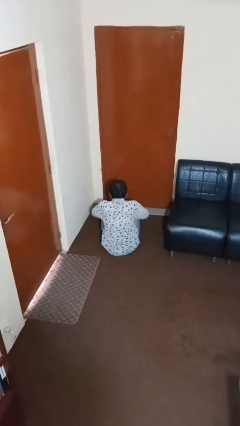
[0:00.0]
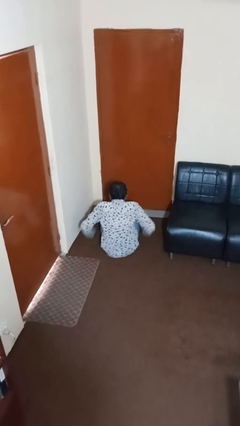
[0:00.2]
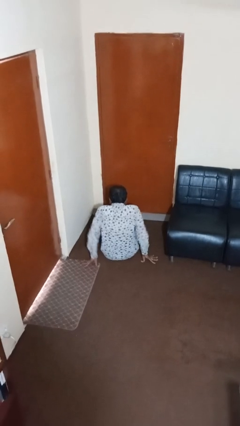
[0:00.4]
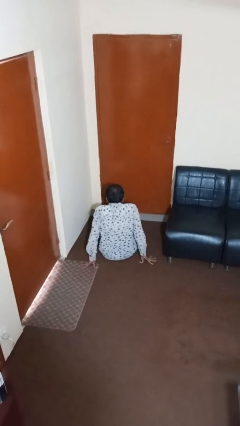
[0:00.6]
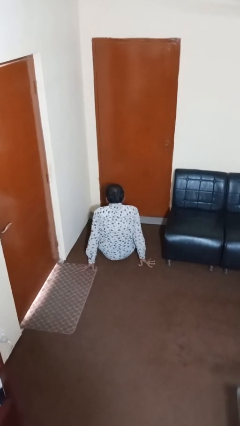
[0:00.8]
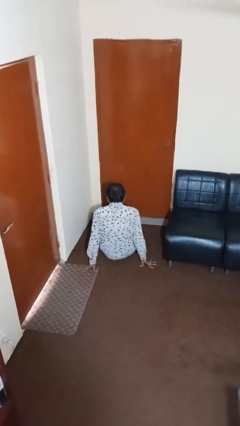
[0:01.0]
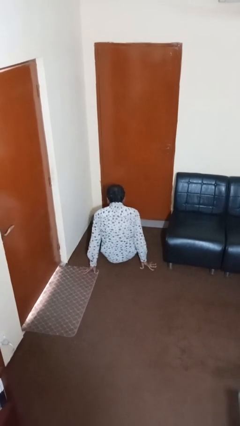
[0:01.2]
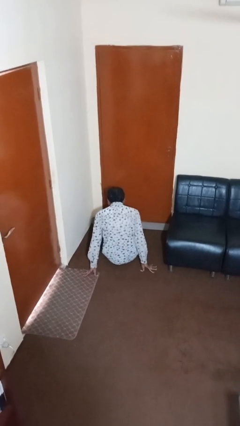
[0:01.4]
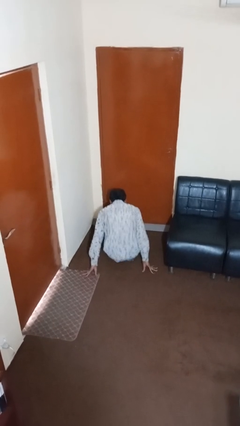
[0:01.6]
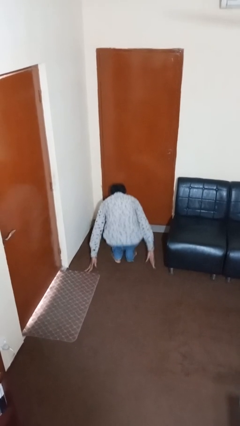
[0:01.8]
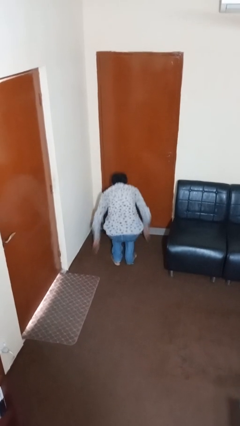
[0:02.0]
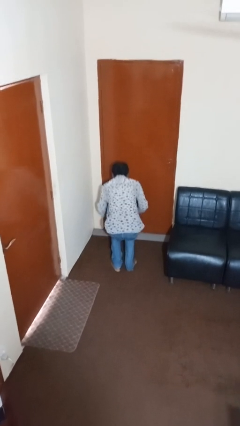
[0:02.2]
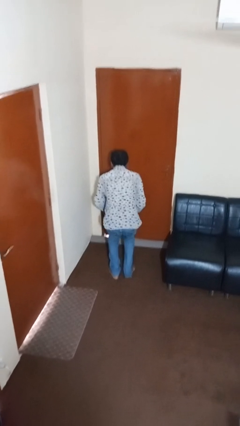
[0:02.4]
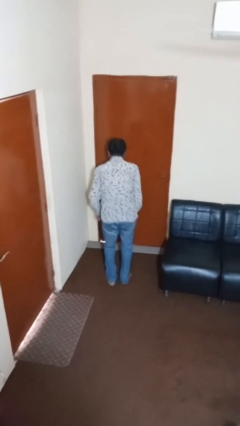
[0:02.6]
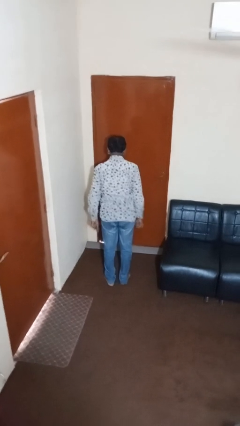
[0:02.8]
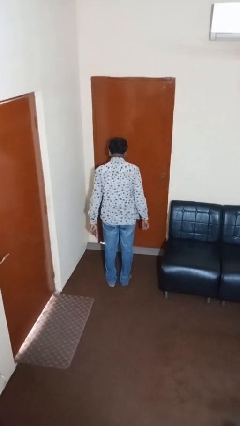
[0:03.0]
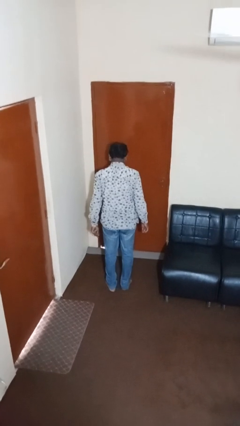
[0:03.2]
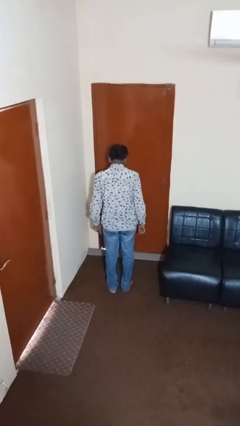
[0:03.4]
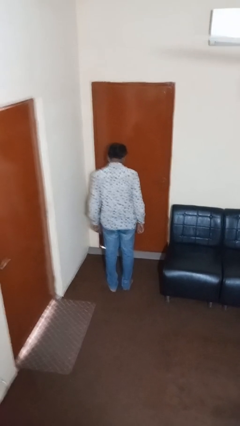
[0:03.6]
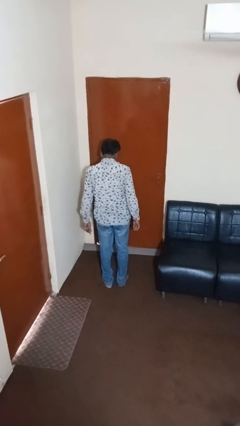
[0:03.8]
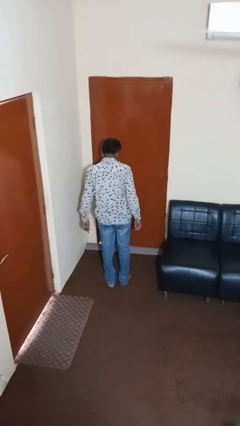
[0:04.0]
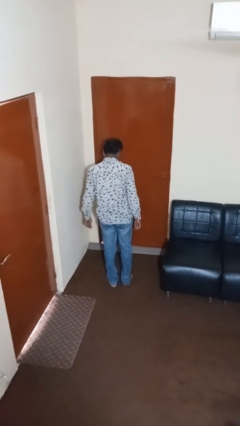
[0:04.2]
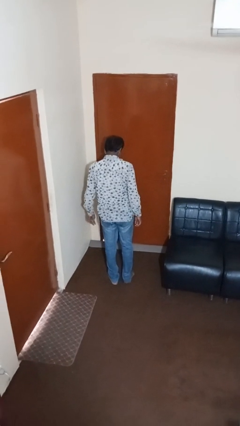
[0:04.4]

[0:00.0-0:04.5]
person stands up from floor

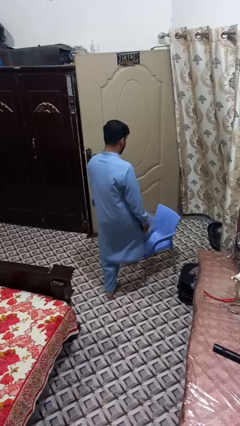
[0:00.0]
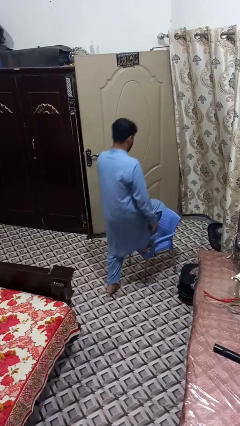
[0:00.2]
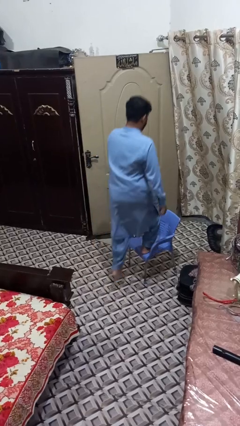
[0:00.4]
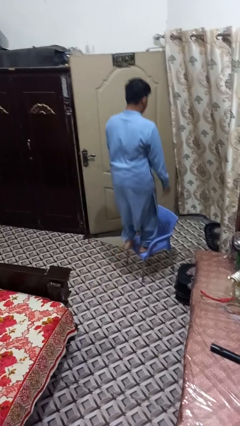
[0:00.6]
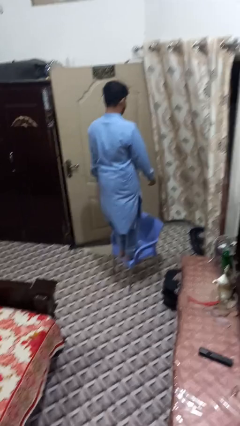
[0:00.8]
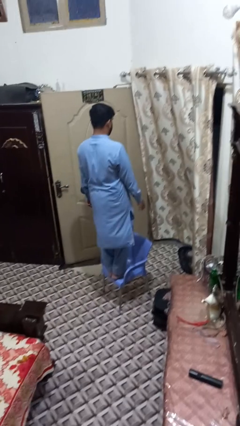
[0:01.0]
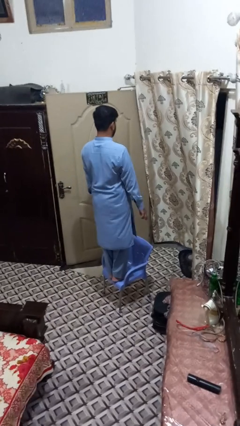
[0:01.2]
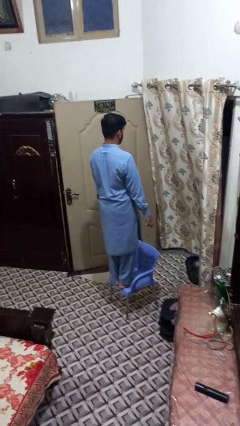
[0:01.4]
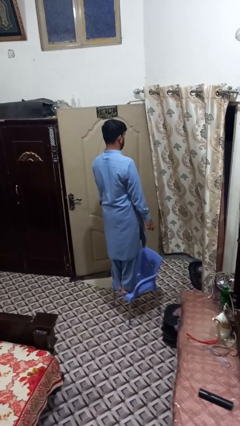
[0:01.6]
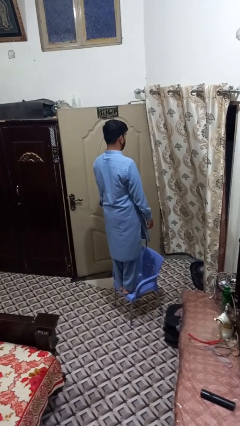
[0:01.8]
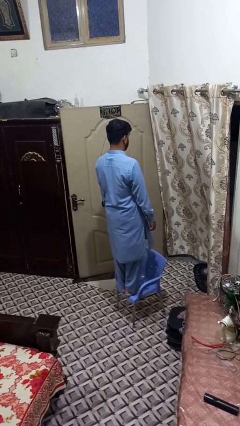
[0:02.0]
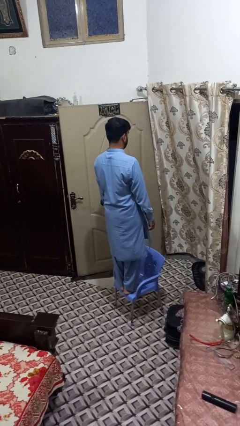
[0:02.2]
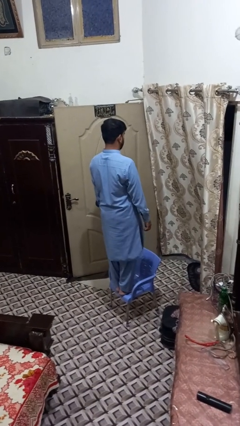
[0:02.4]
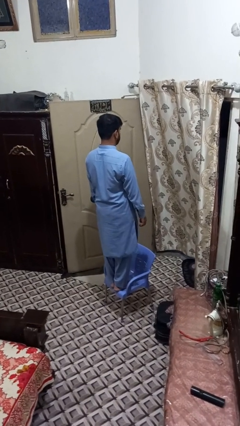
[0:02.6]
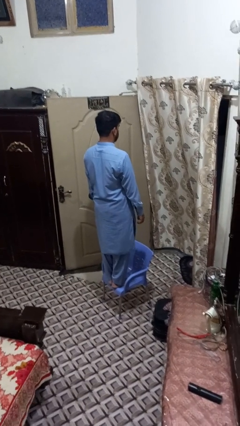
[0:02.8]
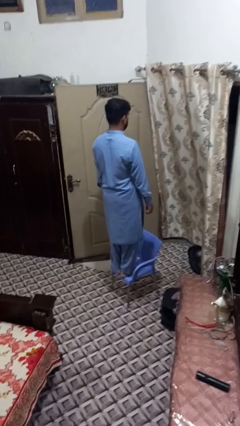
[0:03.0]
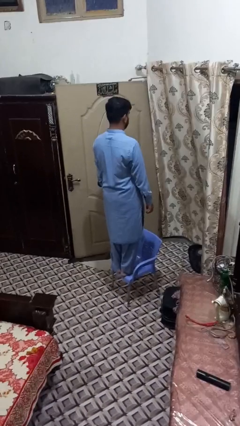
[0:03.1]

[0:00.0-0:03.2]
person climbs on chair

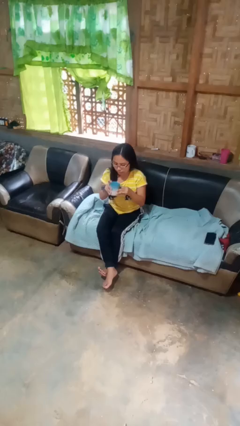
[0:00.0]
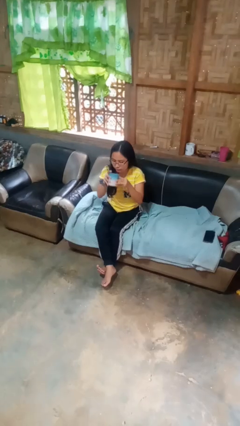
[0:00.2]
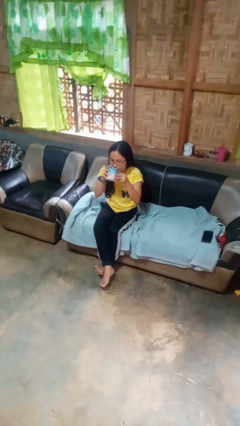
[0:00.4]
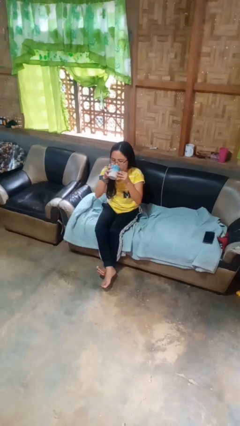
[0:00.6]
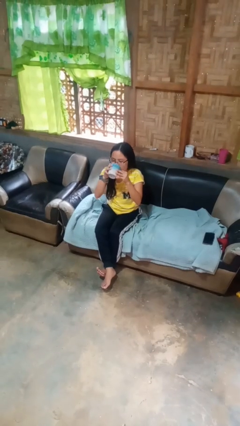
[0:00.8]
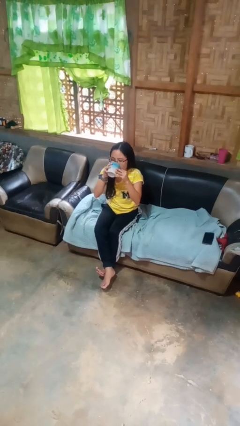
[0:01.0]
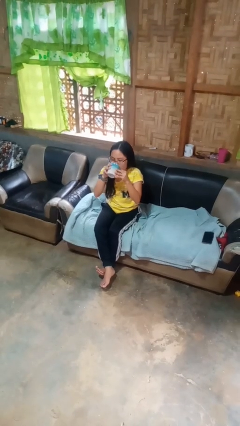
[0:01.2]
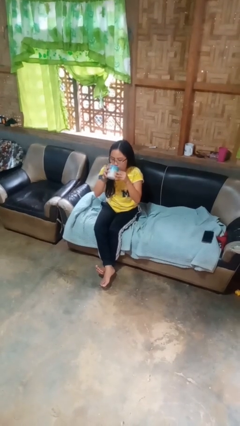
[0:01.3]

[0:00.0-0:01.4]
person drinks from mug

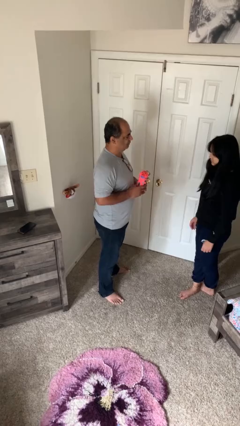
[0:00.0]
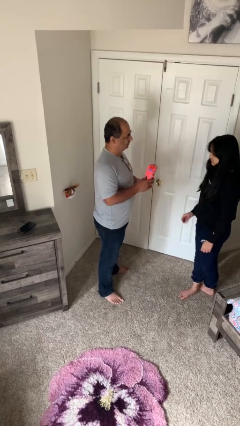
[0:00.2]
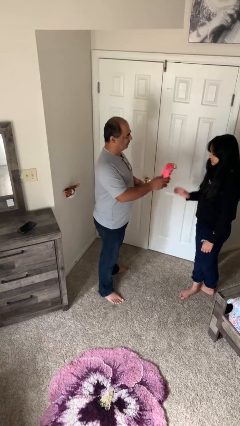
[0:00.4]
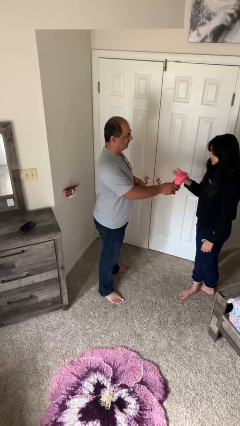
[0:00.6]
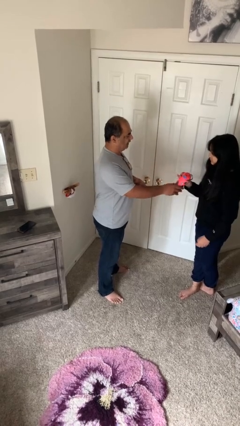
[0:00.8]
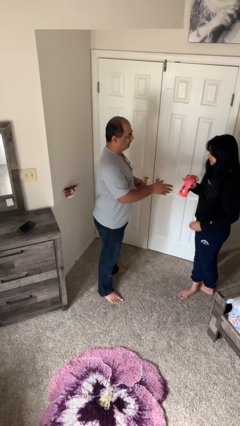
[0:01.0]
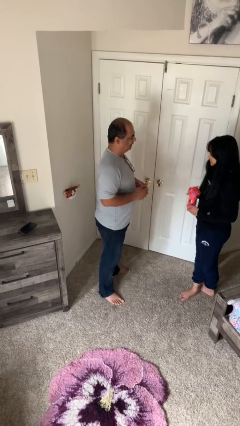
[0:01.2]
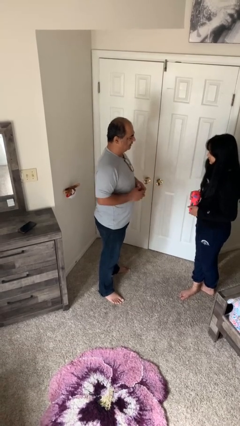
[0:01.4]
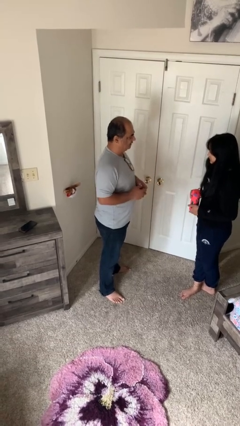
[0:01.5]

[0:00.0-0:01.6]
person transfers object to person

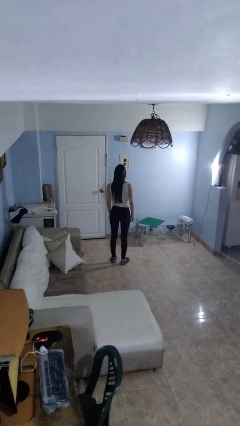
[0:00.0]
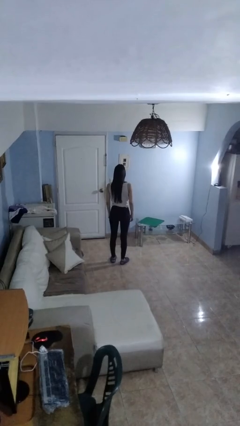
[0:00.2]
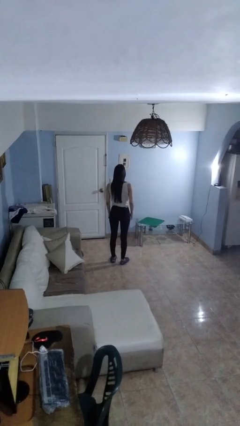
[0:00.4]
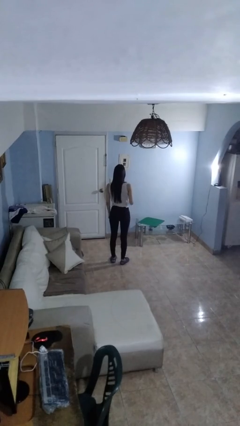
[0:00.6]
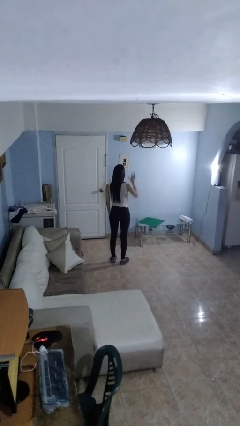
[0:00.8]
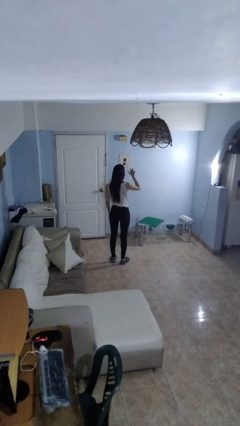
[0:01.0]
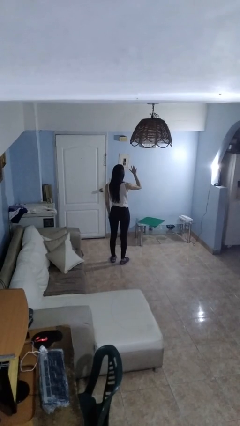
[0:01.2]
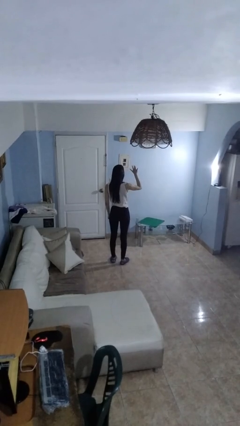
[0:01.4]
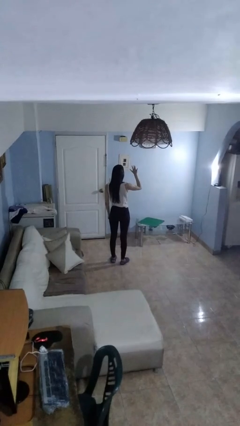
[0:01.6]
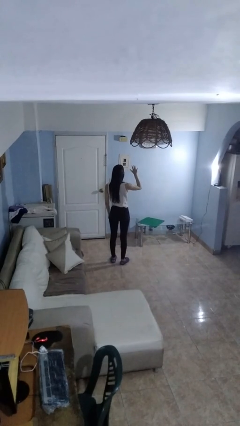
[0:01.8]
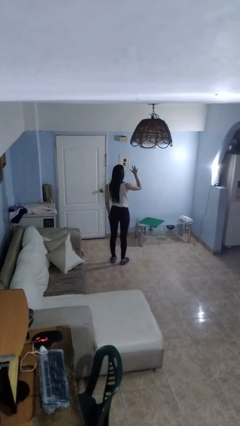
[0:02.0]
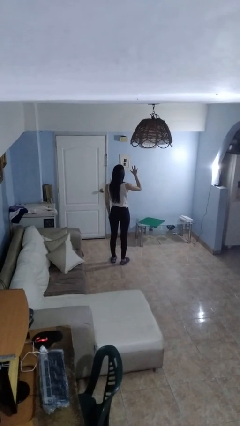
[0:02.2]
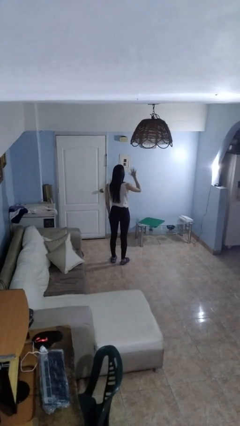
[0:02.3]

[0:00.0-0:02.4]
person gestures number five

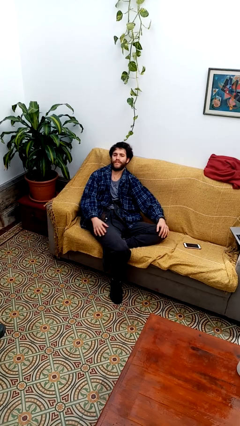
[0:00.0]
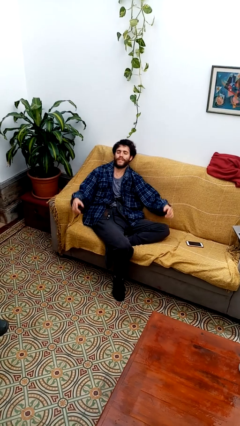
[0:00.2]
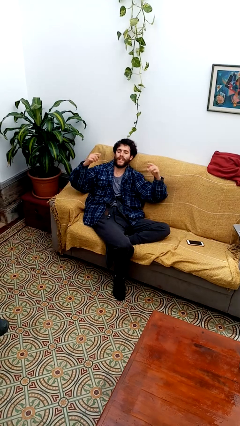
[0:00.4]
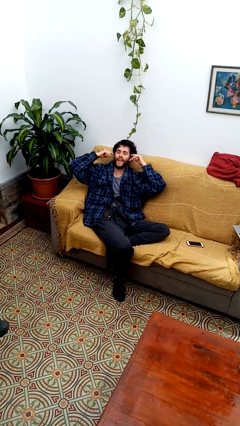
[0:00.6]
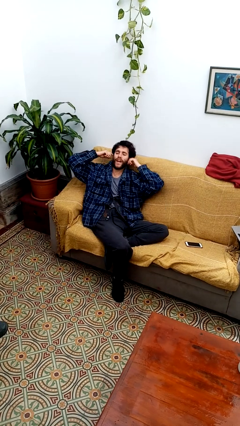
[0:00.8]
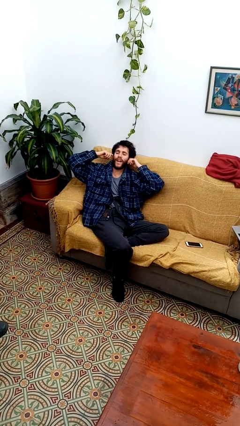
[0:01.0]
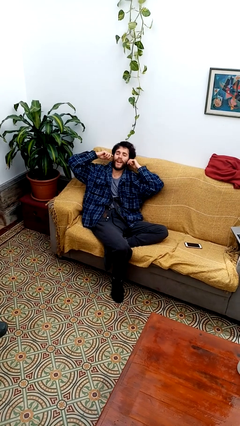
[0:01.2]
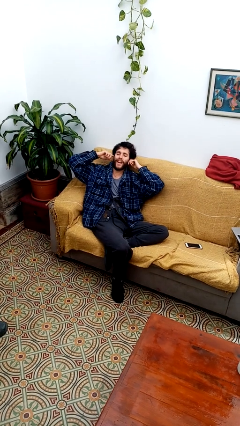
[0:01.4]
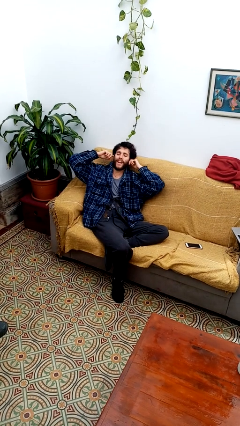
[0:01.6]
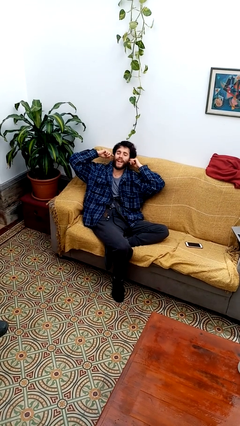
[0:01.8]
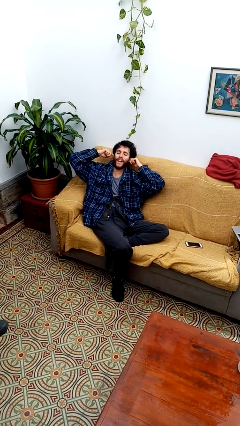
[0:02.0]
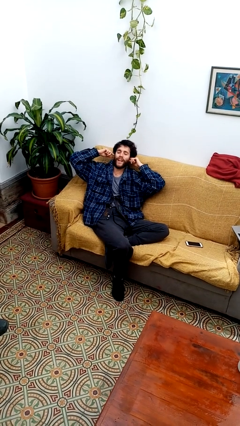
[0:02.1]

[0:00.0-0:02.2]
person puts fingers in ear

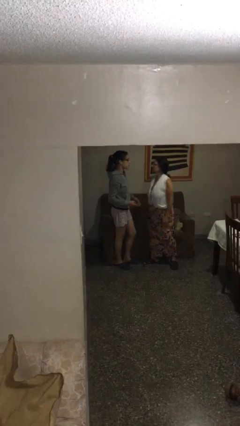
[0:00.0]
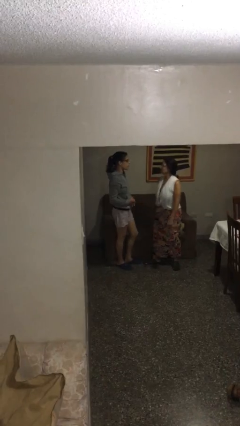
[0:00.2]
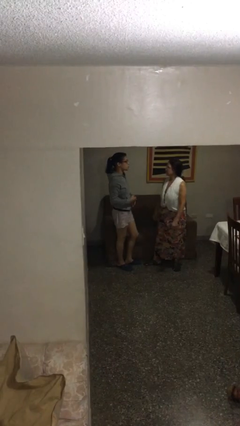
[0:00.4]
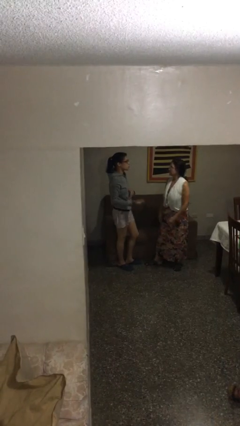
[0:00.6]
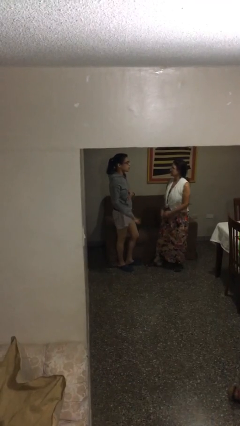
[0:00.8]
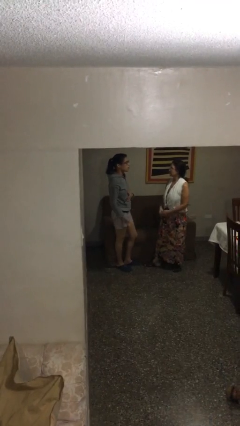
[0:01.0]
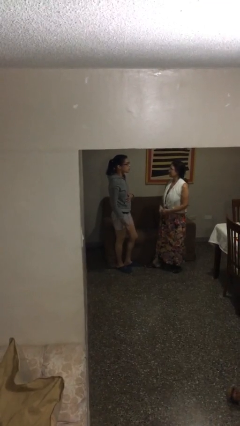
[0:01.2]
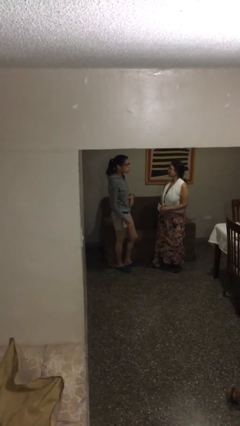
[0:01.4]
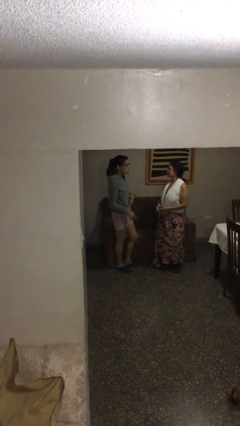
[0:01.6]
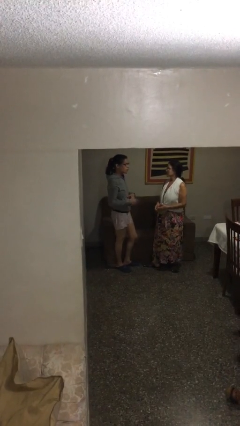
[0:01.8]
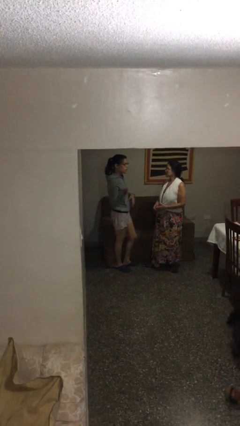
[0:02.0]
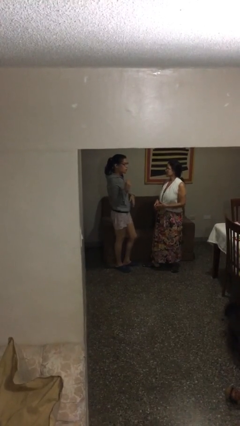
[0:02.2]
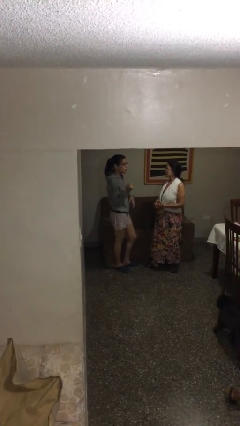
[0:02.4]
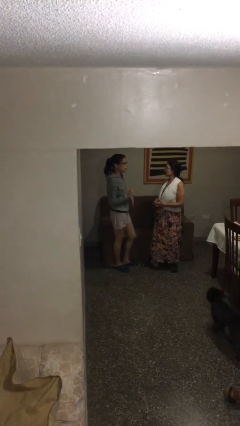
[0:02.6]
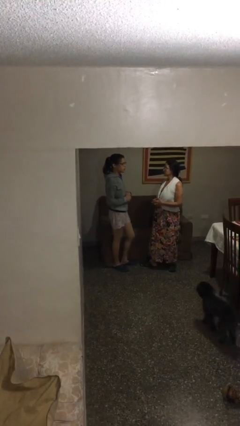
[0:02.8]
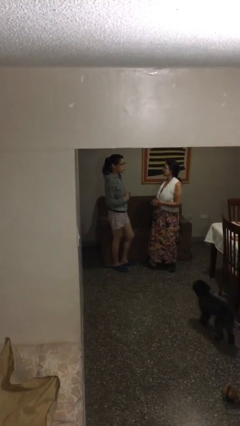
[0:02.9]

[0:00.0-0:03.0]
person talks to person
